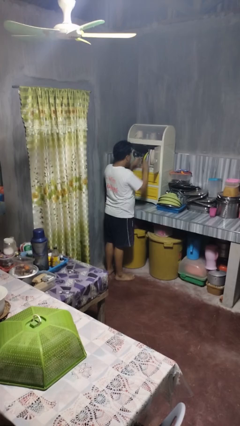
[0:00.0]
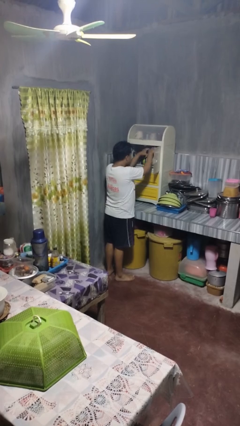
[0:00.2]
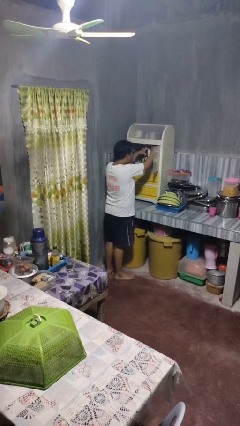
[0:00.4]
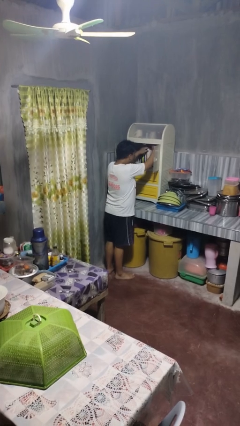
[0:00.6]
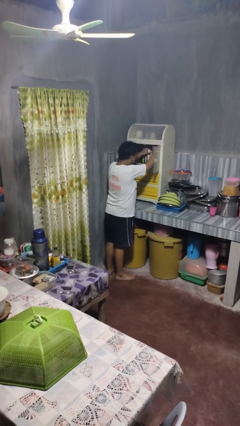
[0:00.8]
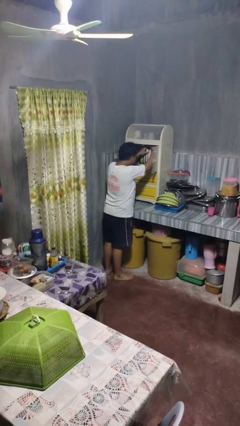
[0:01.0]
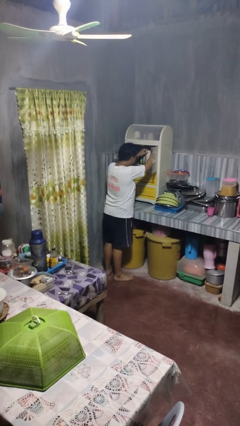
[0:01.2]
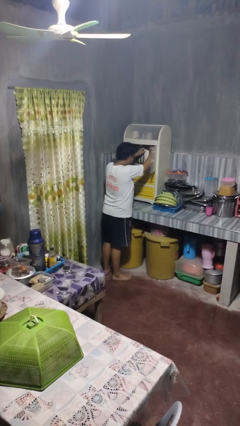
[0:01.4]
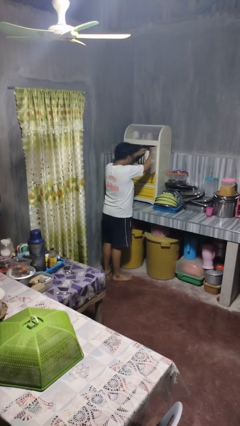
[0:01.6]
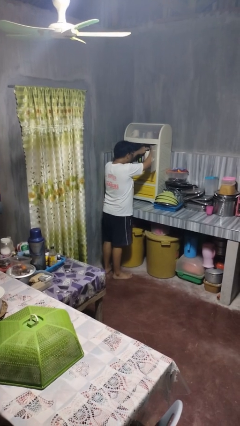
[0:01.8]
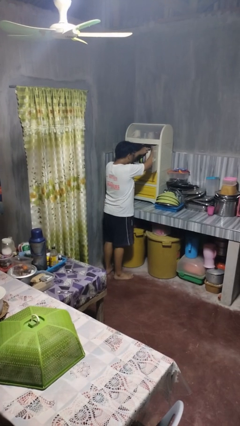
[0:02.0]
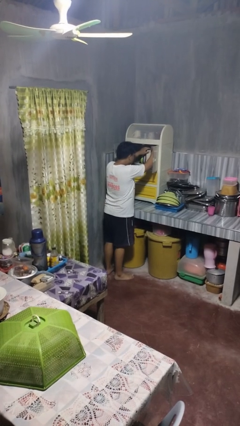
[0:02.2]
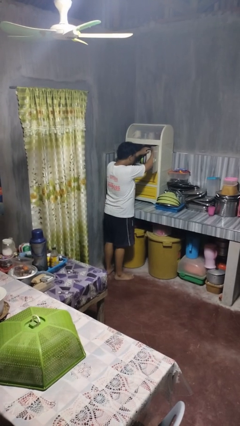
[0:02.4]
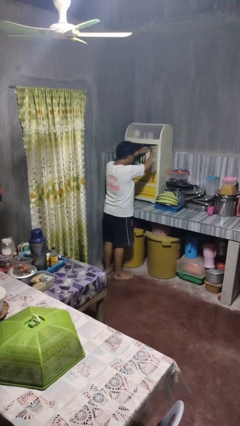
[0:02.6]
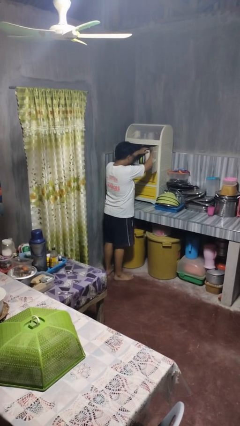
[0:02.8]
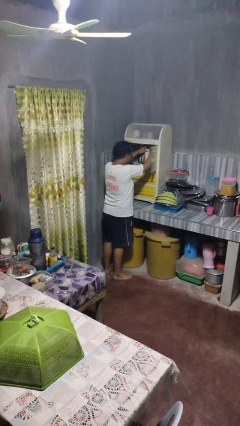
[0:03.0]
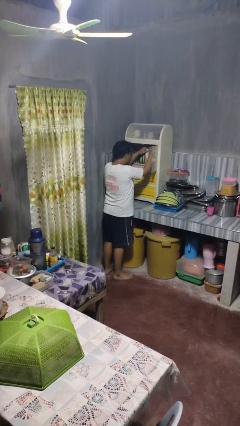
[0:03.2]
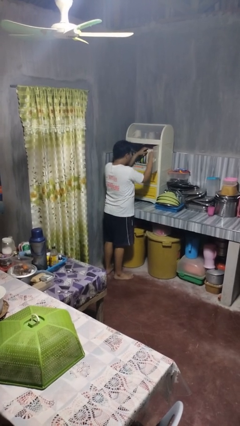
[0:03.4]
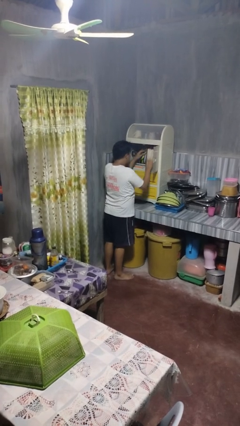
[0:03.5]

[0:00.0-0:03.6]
person searches in cabinet

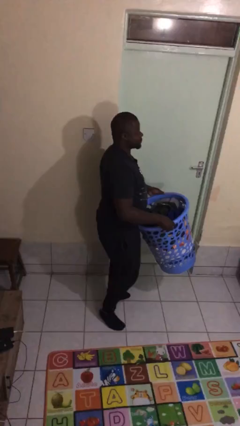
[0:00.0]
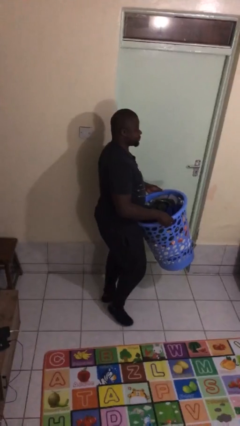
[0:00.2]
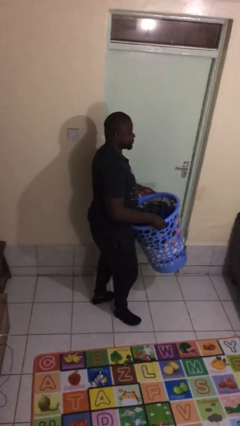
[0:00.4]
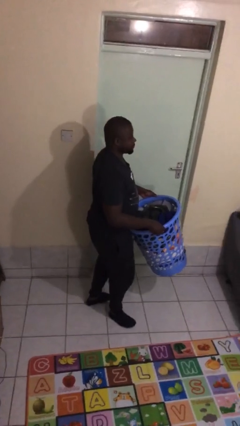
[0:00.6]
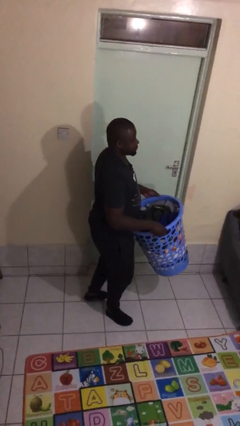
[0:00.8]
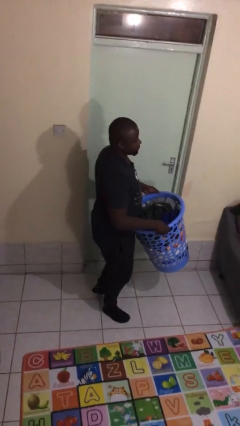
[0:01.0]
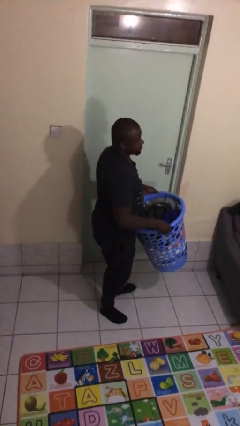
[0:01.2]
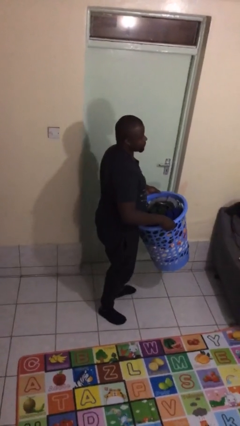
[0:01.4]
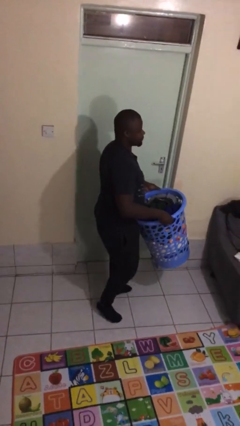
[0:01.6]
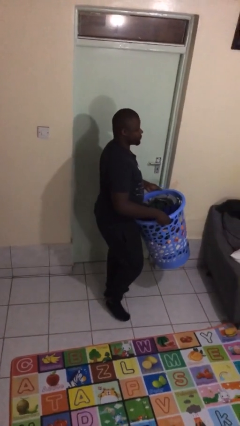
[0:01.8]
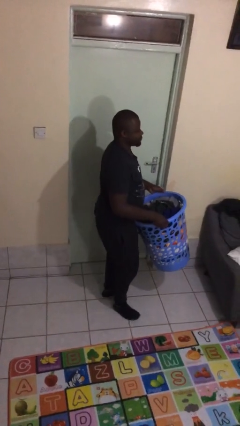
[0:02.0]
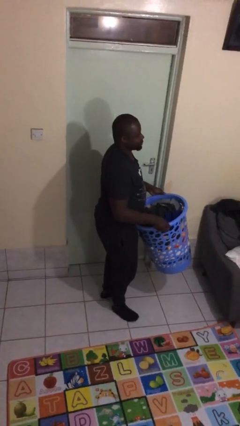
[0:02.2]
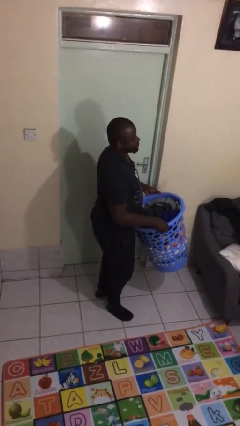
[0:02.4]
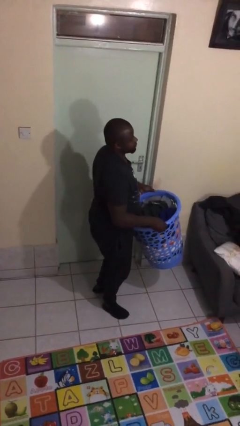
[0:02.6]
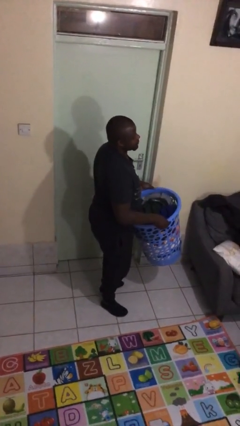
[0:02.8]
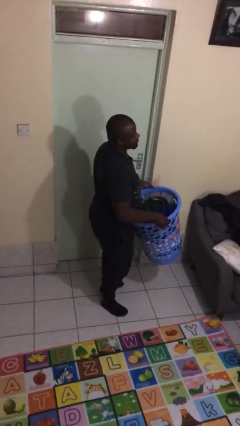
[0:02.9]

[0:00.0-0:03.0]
person carries laundry basket

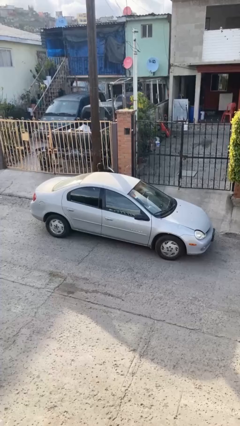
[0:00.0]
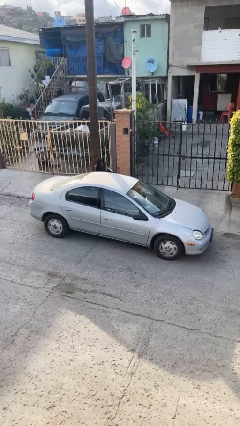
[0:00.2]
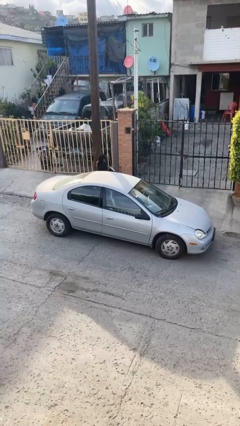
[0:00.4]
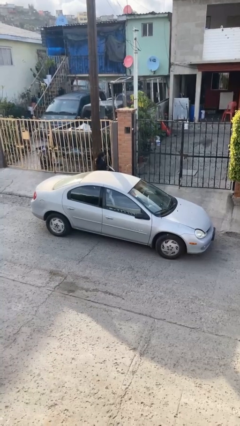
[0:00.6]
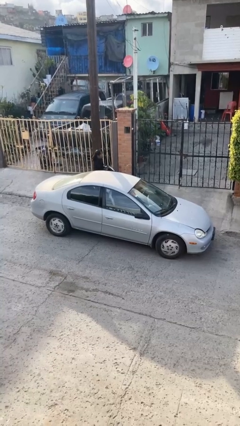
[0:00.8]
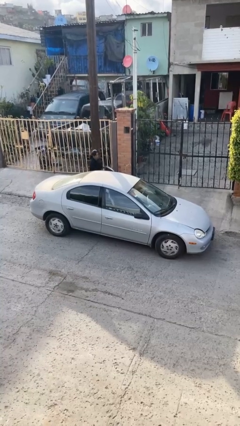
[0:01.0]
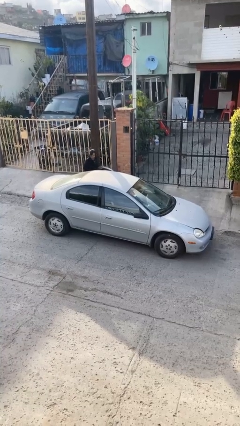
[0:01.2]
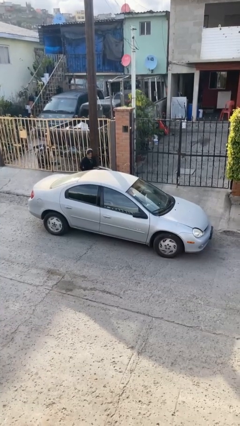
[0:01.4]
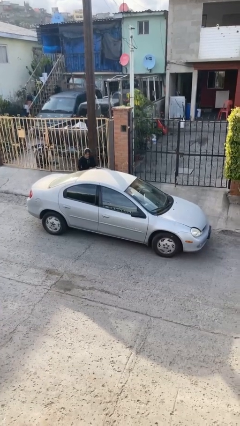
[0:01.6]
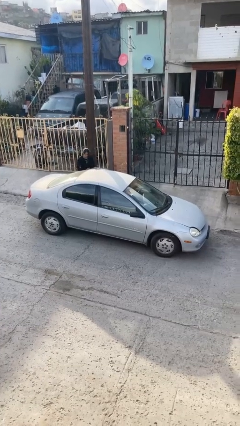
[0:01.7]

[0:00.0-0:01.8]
car drops off person

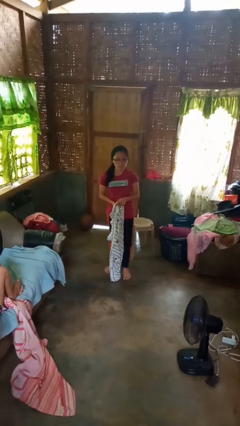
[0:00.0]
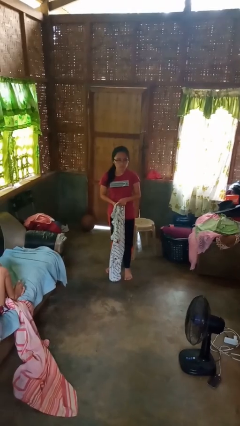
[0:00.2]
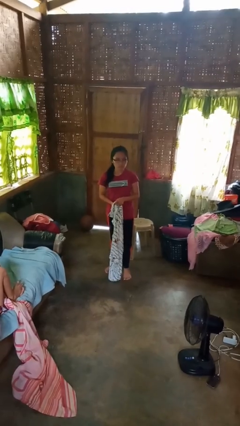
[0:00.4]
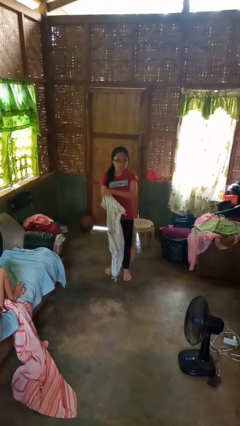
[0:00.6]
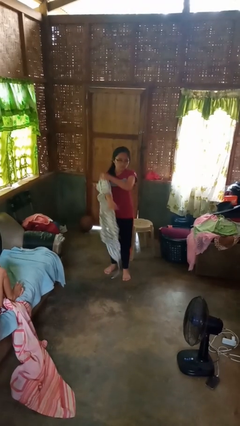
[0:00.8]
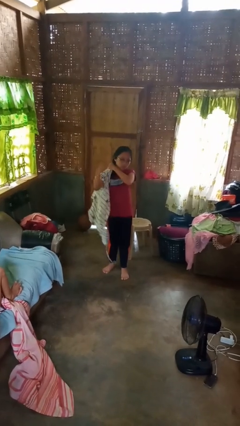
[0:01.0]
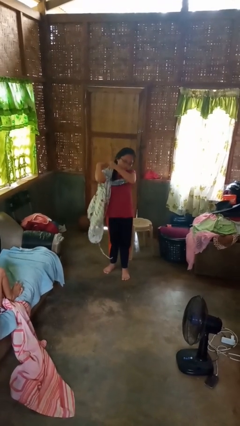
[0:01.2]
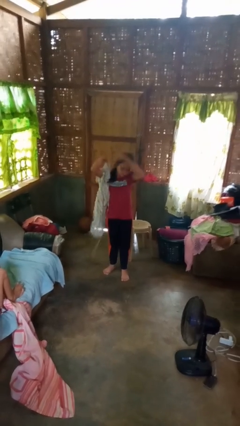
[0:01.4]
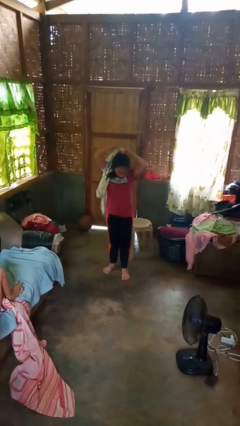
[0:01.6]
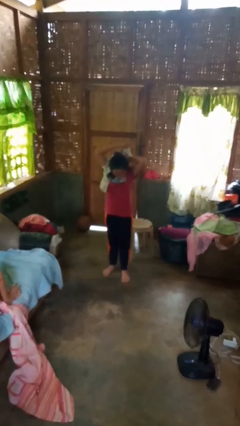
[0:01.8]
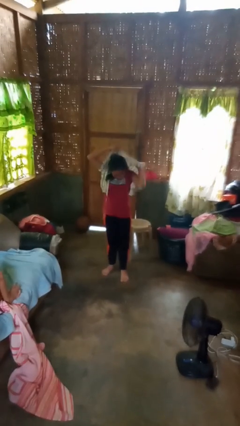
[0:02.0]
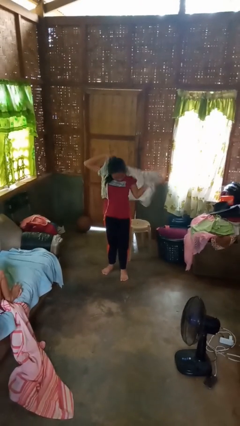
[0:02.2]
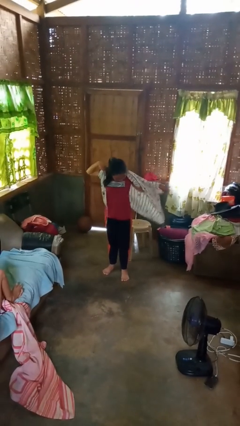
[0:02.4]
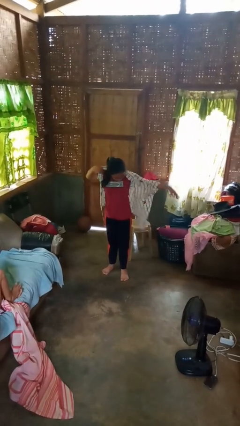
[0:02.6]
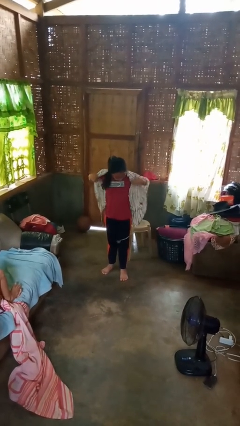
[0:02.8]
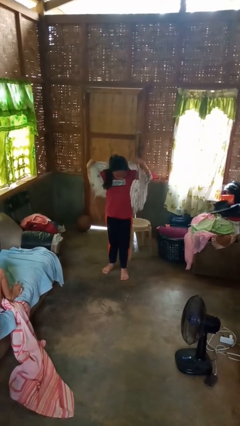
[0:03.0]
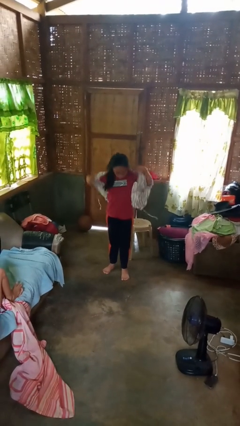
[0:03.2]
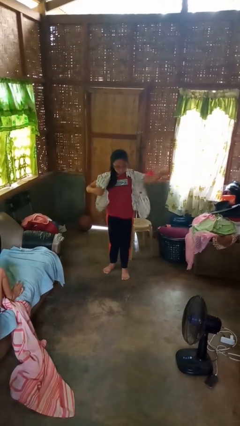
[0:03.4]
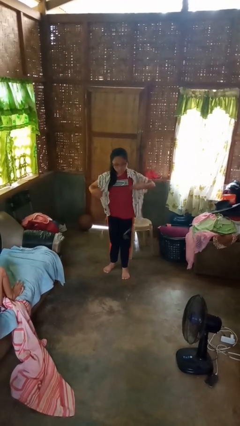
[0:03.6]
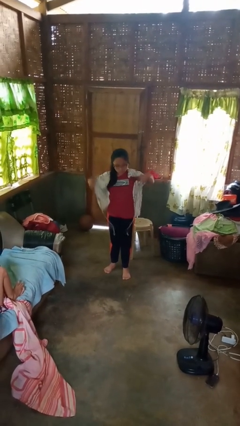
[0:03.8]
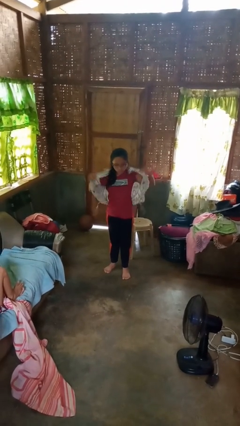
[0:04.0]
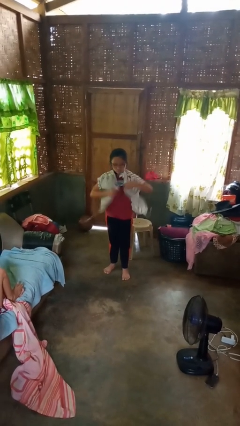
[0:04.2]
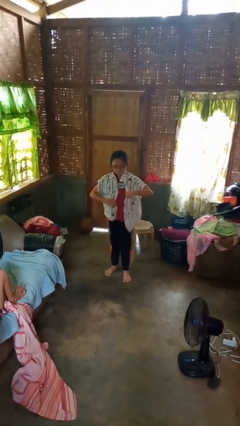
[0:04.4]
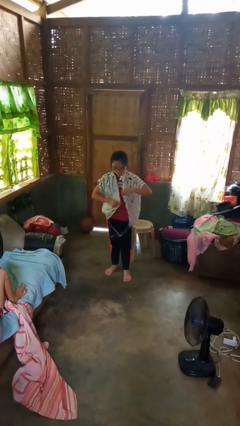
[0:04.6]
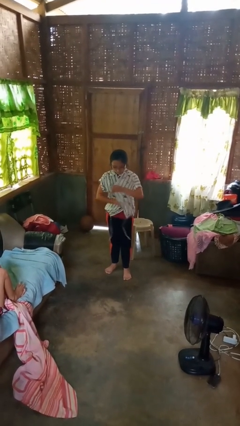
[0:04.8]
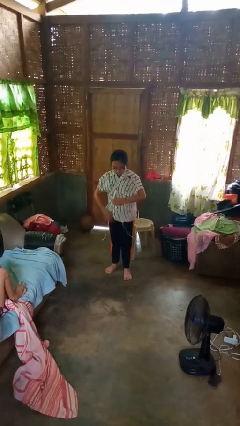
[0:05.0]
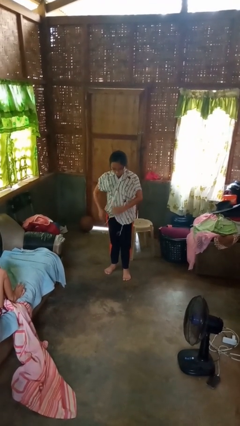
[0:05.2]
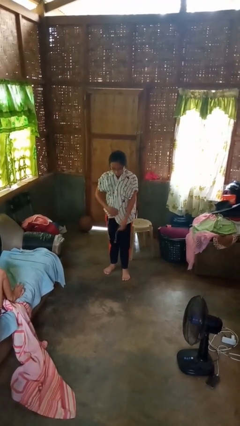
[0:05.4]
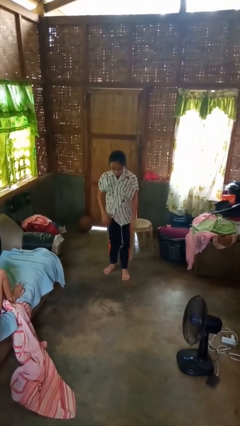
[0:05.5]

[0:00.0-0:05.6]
person puts on shirt

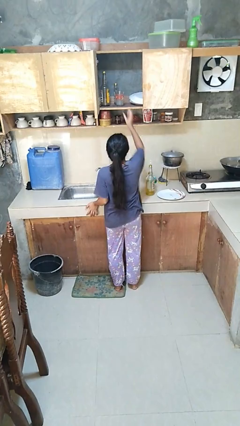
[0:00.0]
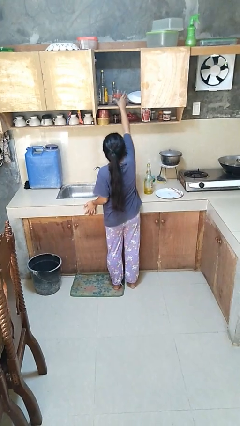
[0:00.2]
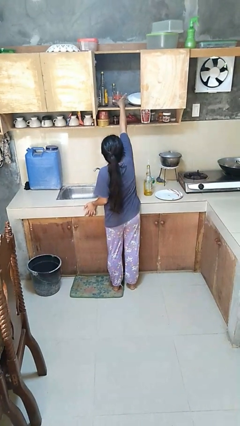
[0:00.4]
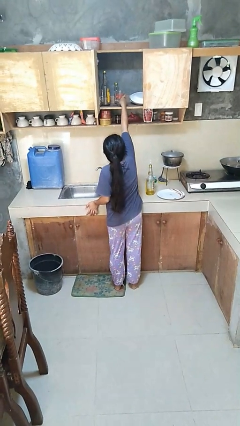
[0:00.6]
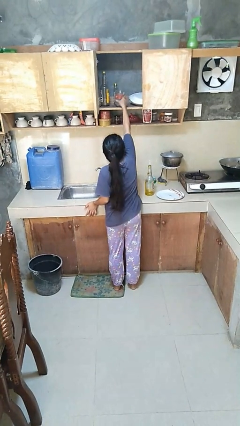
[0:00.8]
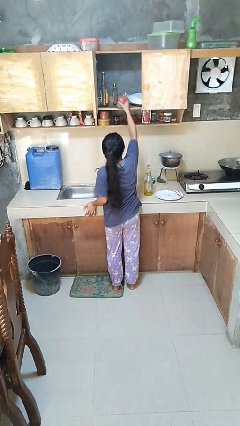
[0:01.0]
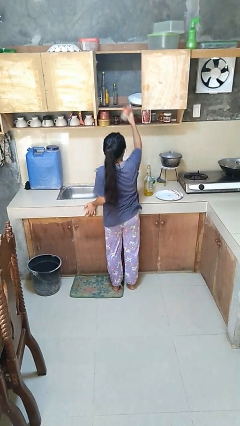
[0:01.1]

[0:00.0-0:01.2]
person takes object from cabinet

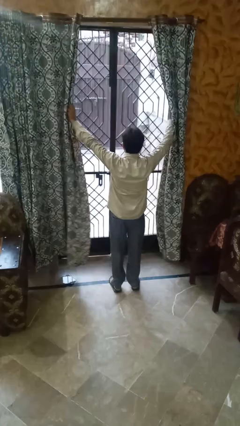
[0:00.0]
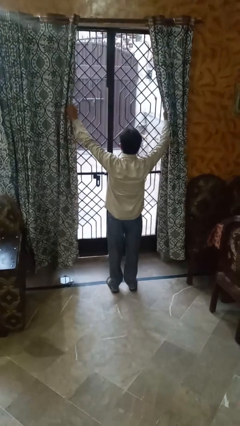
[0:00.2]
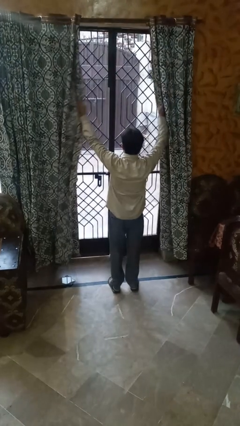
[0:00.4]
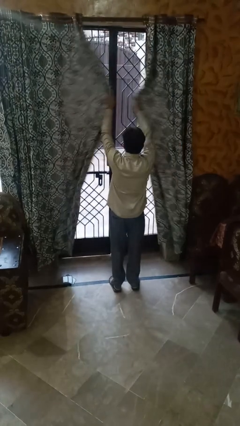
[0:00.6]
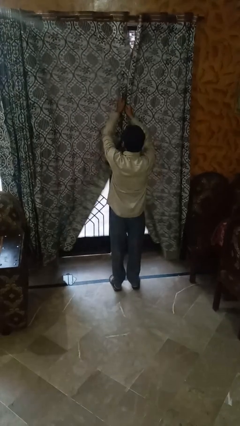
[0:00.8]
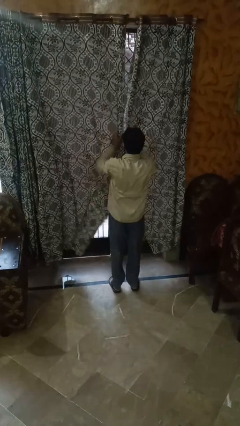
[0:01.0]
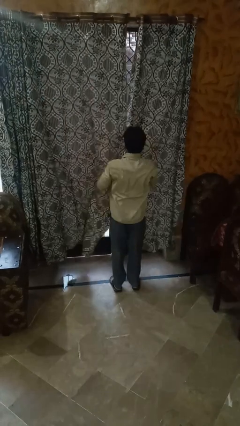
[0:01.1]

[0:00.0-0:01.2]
person closes curtains

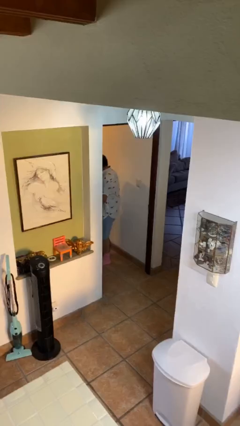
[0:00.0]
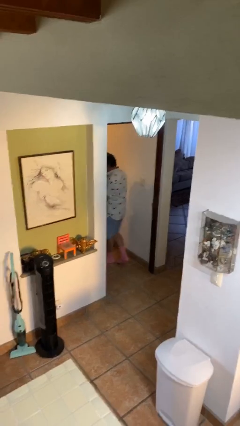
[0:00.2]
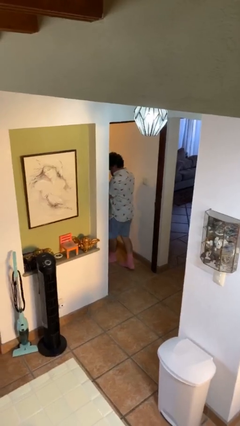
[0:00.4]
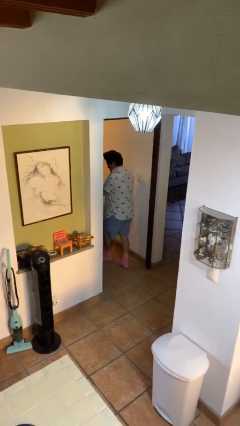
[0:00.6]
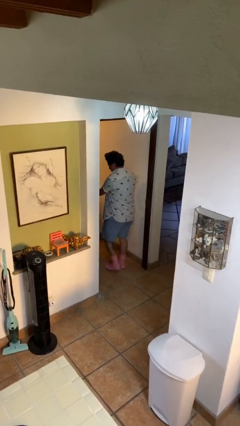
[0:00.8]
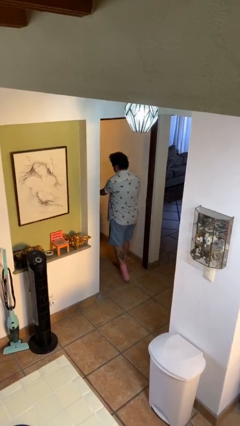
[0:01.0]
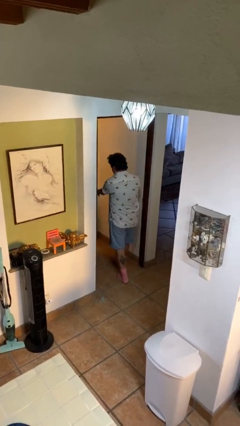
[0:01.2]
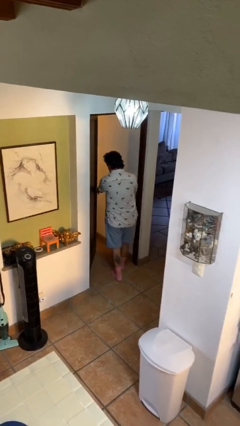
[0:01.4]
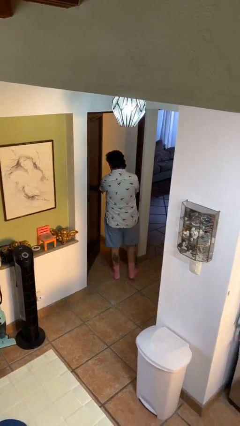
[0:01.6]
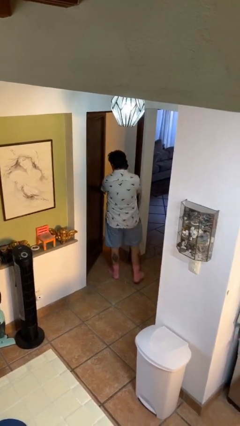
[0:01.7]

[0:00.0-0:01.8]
person enters scene through structure
